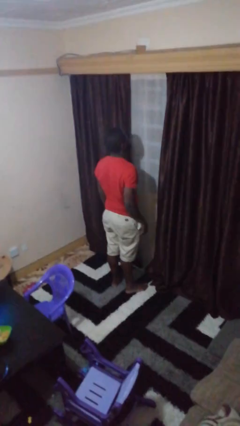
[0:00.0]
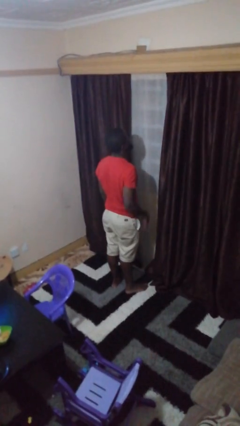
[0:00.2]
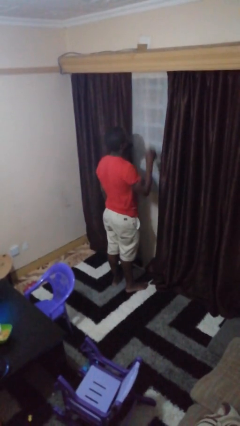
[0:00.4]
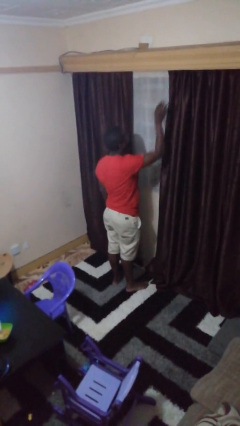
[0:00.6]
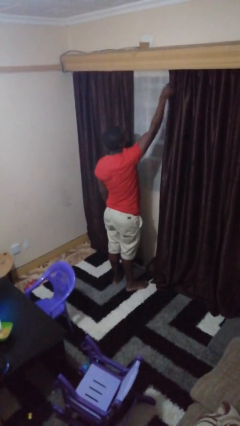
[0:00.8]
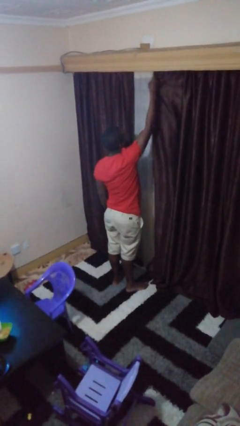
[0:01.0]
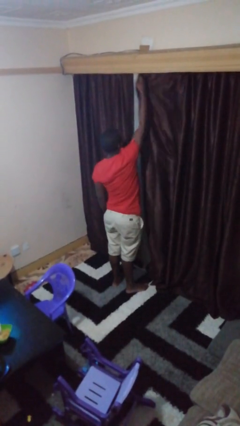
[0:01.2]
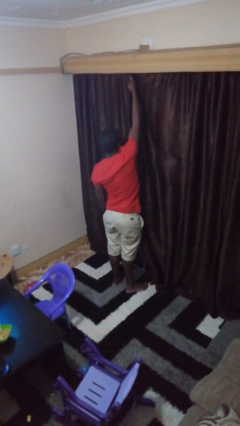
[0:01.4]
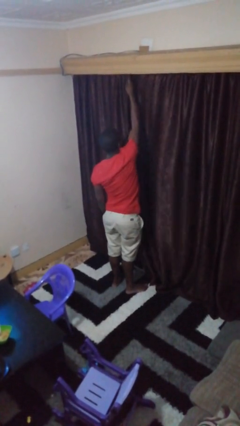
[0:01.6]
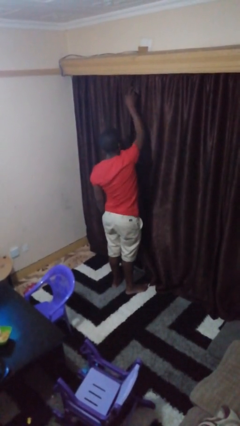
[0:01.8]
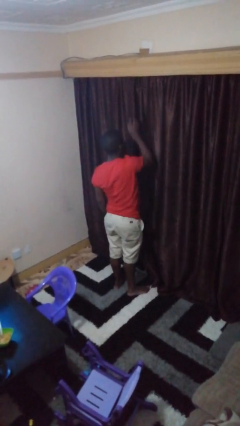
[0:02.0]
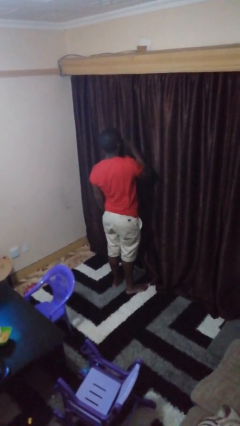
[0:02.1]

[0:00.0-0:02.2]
person closes curtains

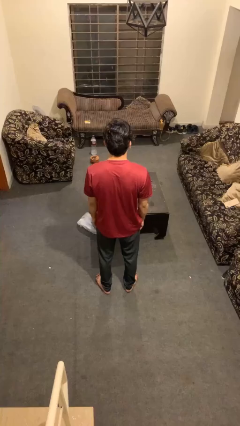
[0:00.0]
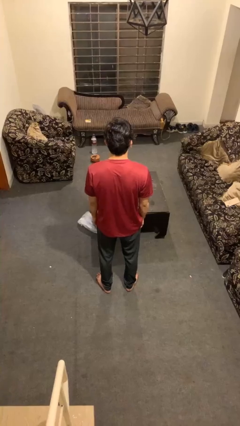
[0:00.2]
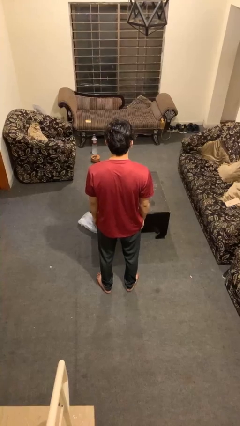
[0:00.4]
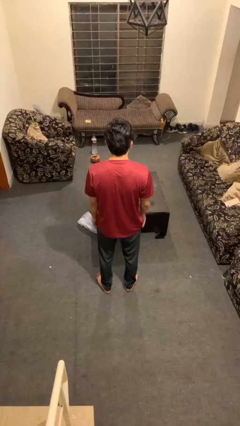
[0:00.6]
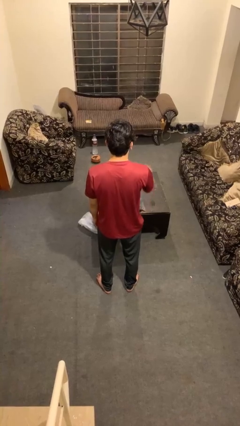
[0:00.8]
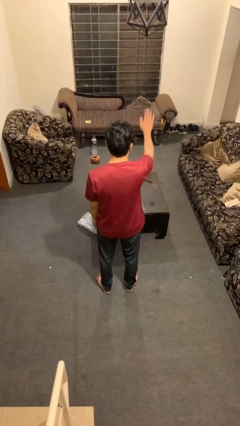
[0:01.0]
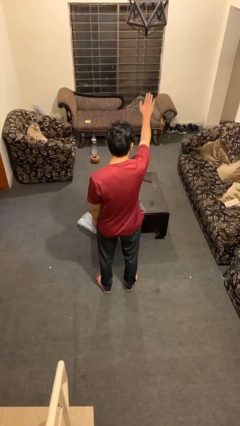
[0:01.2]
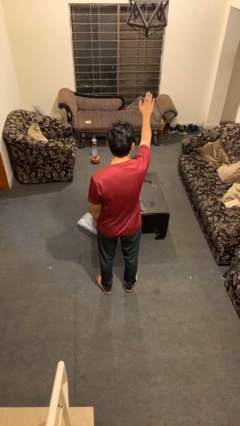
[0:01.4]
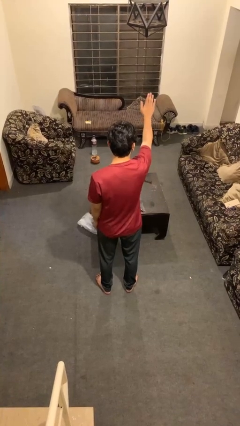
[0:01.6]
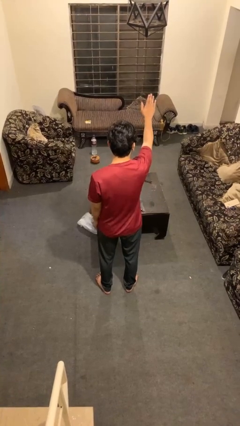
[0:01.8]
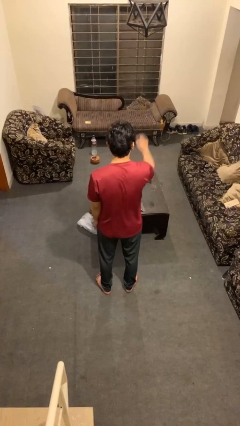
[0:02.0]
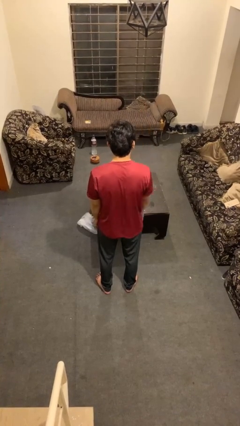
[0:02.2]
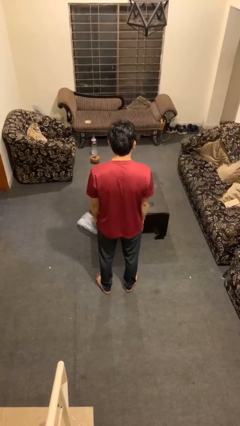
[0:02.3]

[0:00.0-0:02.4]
person gestures stop

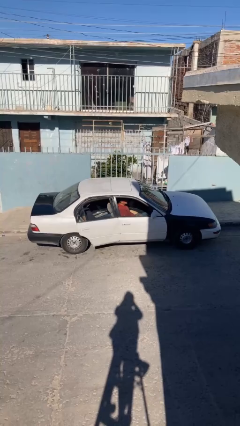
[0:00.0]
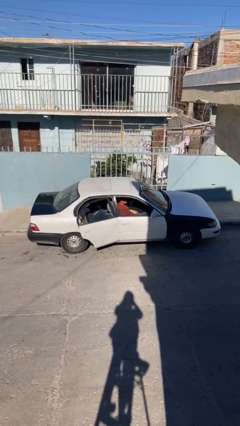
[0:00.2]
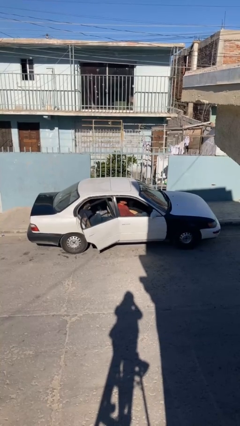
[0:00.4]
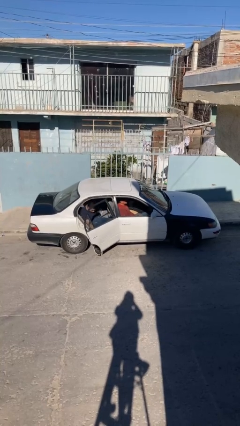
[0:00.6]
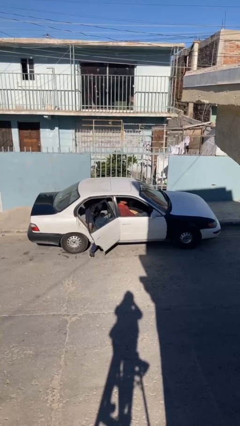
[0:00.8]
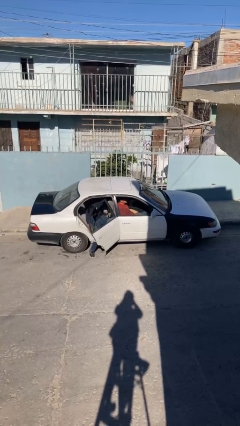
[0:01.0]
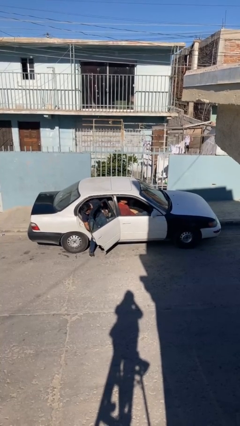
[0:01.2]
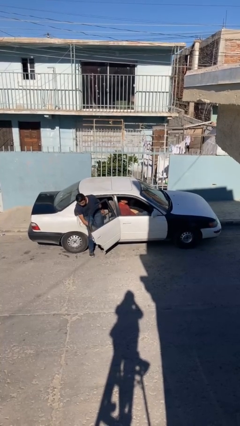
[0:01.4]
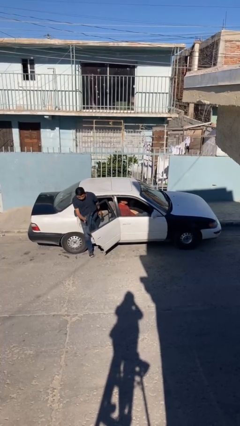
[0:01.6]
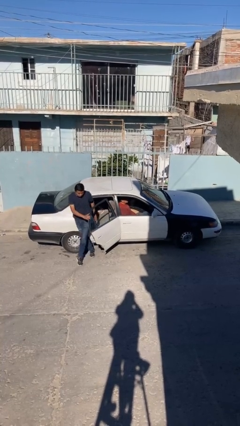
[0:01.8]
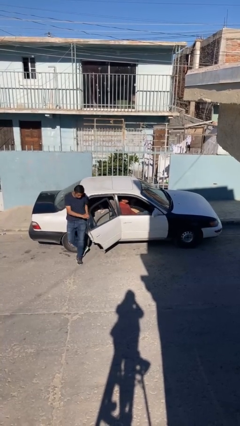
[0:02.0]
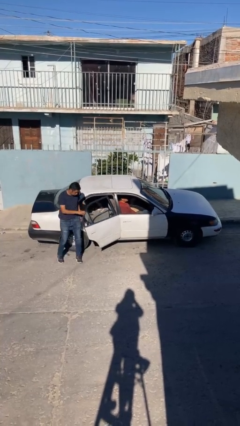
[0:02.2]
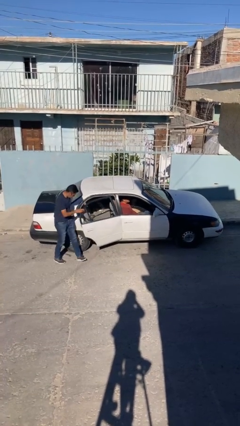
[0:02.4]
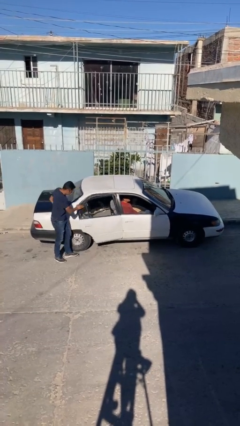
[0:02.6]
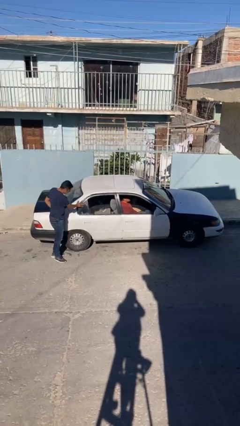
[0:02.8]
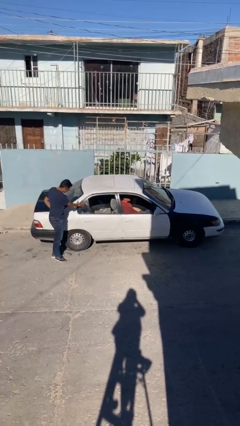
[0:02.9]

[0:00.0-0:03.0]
car drops off person

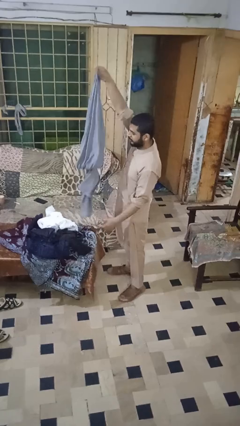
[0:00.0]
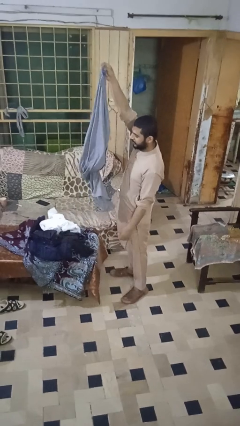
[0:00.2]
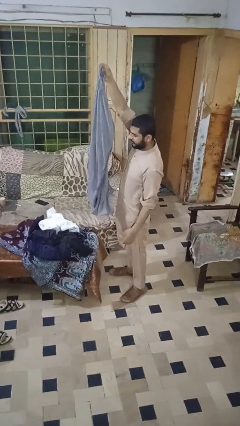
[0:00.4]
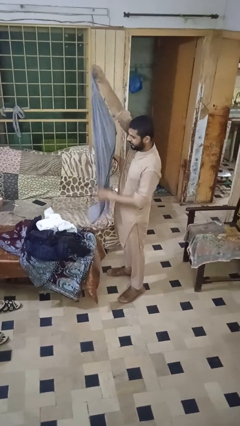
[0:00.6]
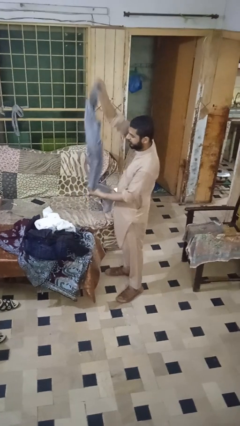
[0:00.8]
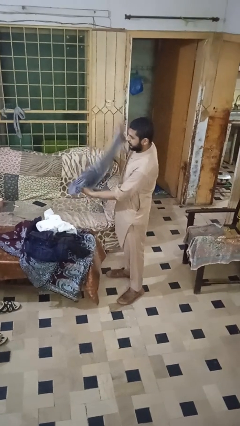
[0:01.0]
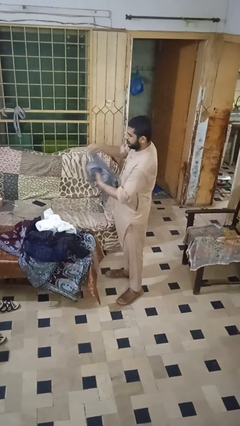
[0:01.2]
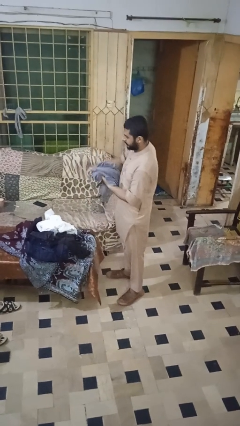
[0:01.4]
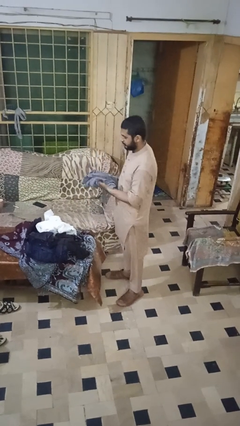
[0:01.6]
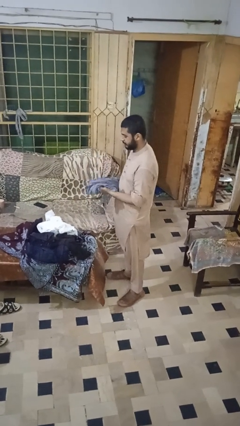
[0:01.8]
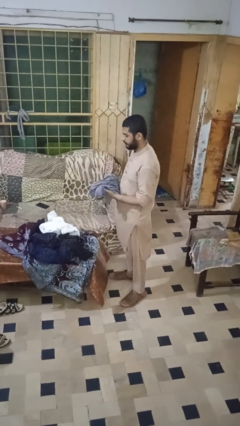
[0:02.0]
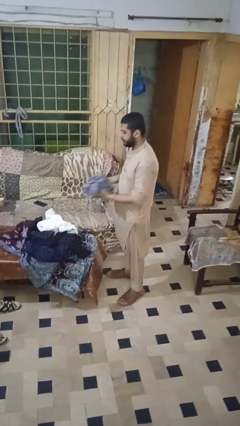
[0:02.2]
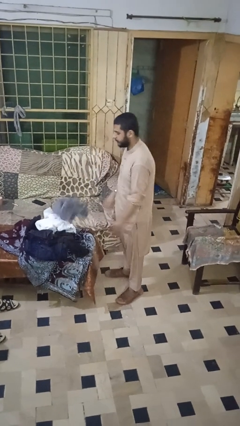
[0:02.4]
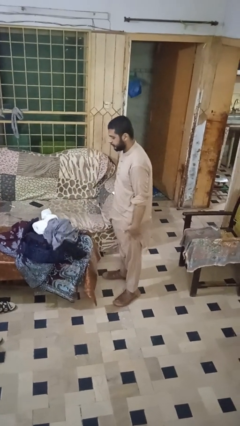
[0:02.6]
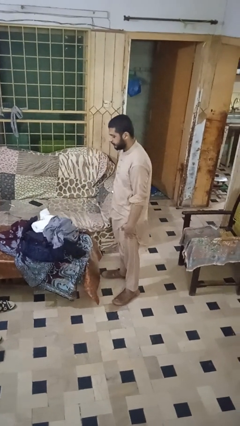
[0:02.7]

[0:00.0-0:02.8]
person folds pants

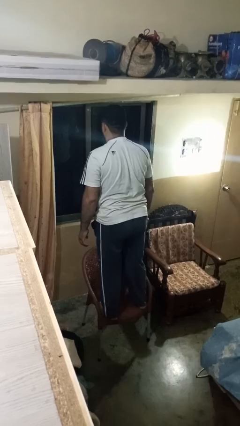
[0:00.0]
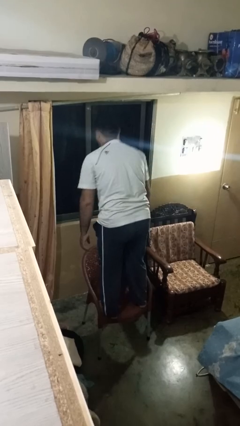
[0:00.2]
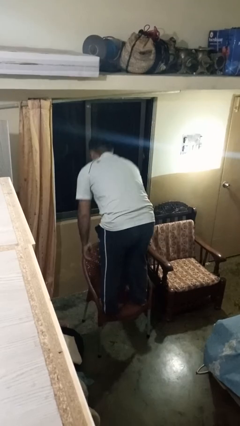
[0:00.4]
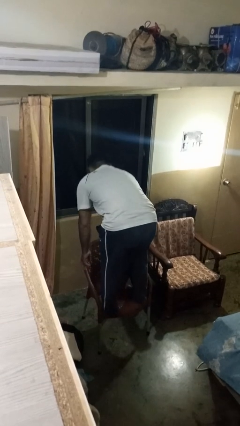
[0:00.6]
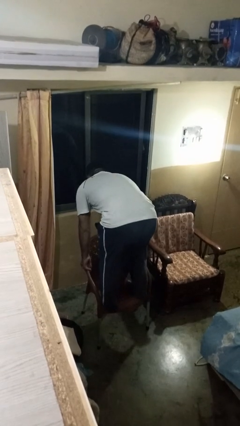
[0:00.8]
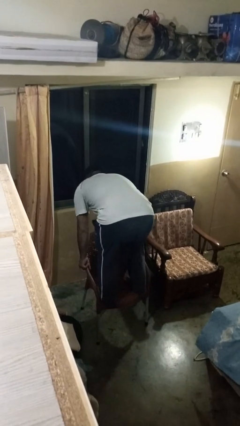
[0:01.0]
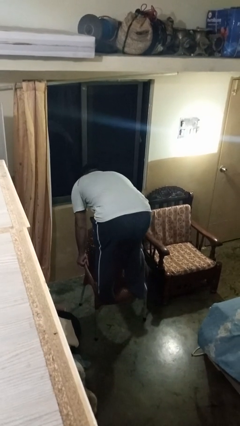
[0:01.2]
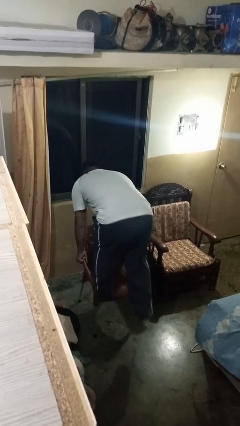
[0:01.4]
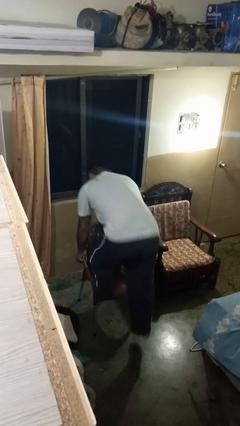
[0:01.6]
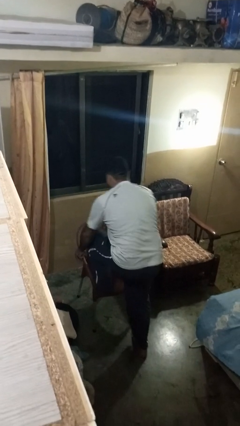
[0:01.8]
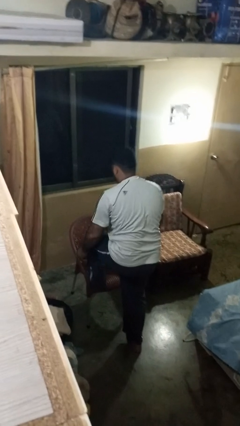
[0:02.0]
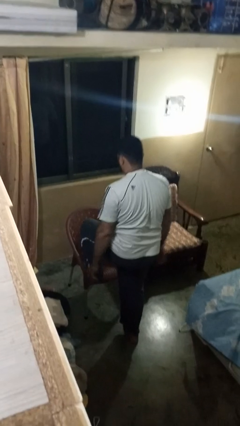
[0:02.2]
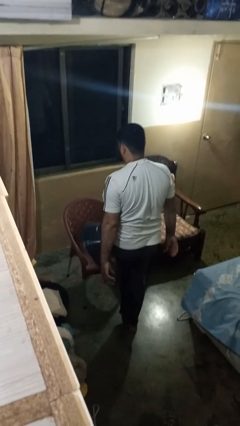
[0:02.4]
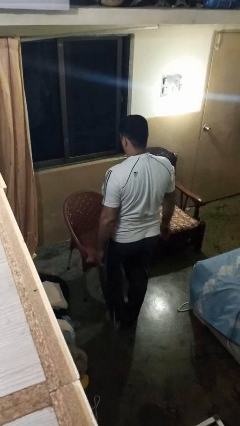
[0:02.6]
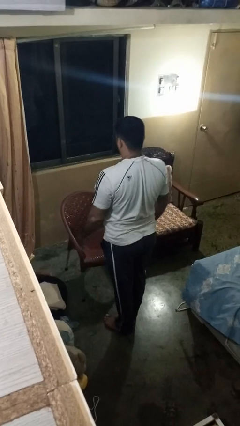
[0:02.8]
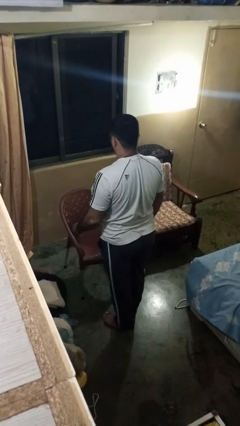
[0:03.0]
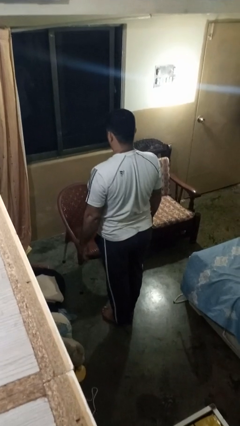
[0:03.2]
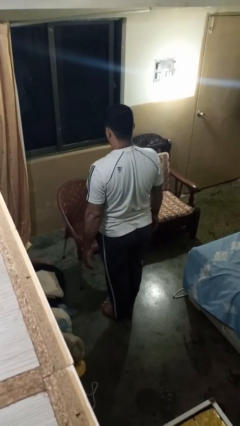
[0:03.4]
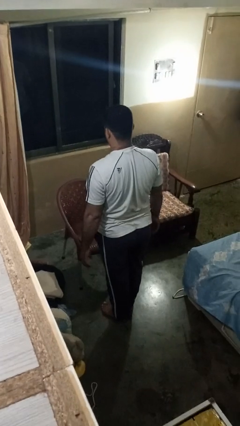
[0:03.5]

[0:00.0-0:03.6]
person climbs off chair

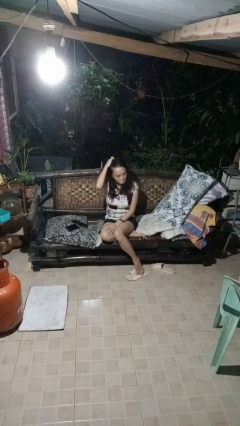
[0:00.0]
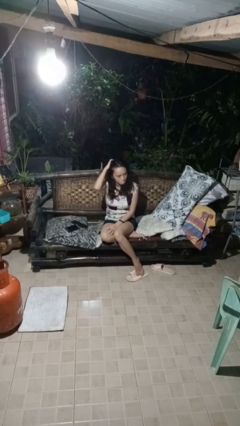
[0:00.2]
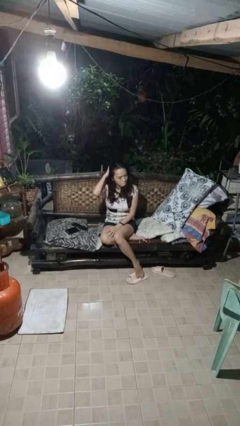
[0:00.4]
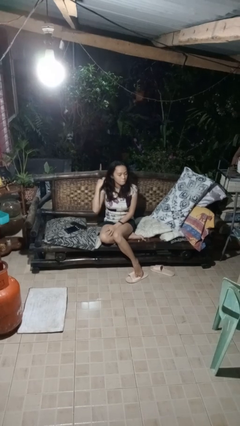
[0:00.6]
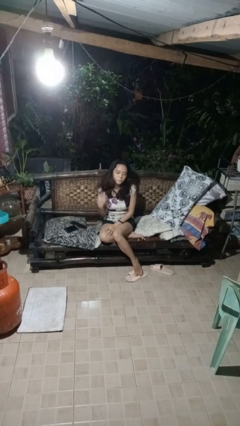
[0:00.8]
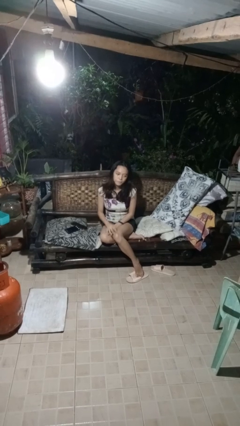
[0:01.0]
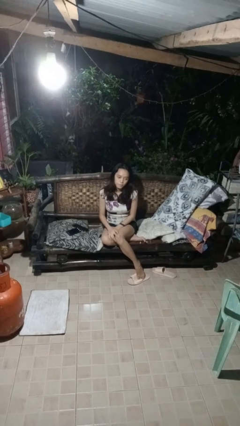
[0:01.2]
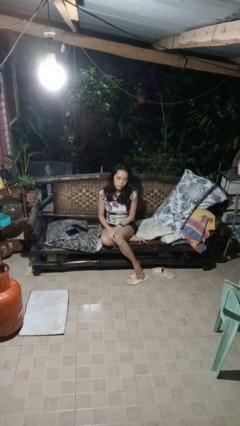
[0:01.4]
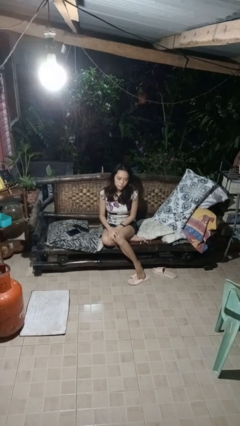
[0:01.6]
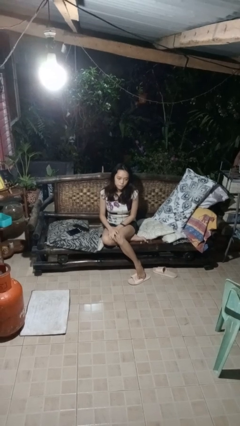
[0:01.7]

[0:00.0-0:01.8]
person searches in couch

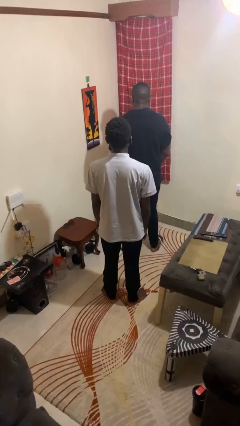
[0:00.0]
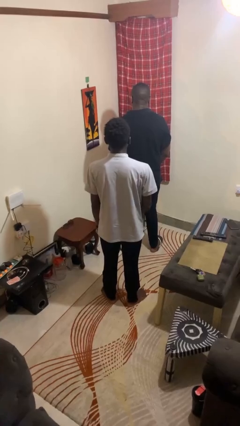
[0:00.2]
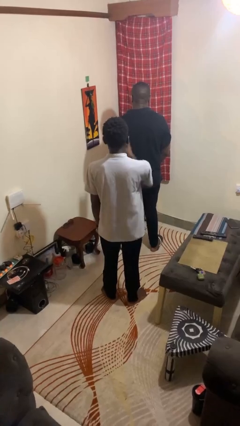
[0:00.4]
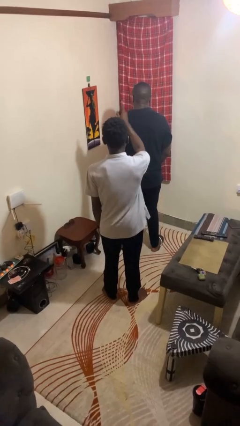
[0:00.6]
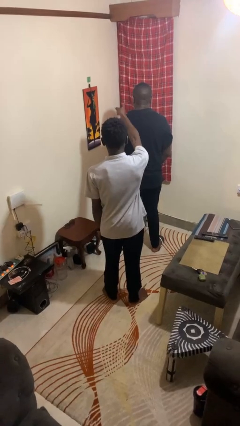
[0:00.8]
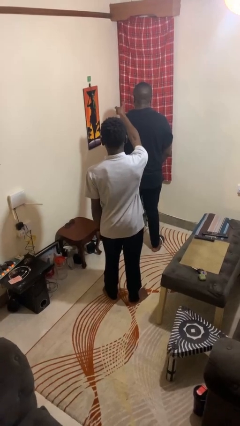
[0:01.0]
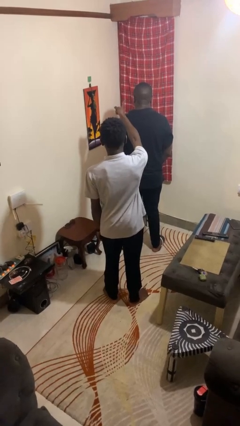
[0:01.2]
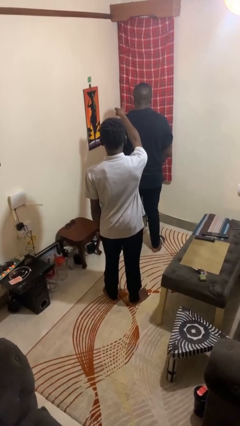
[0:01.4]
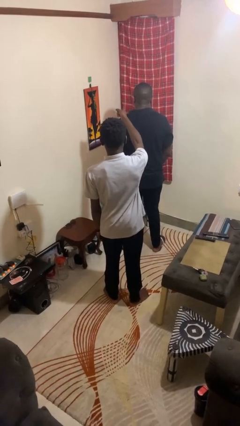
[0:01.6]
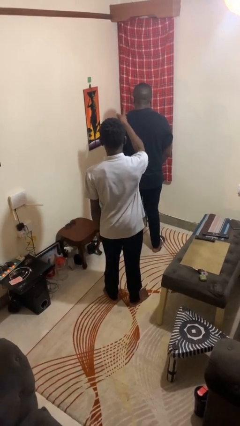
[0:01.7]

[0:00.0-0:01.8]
person points at person
